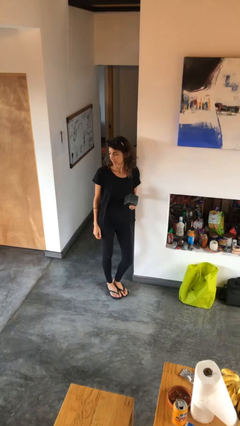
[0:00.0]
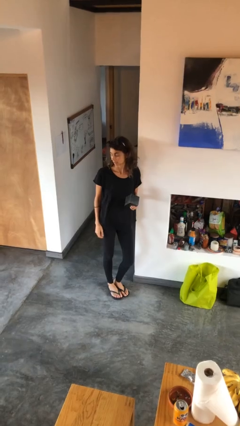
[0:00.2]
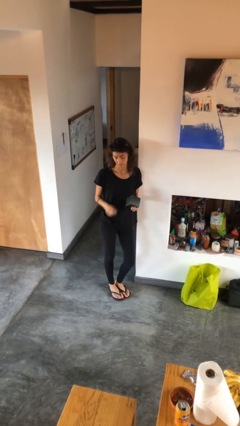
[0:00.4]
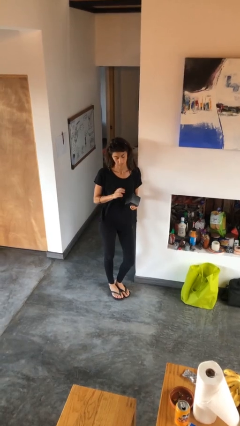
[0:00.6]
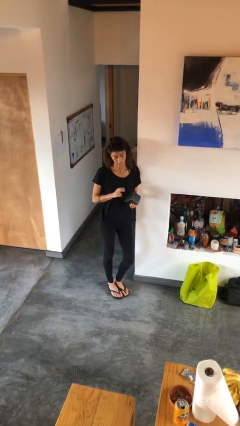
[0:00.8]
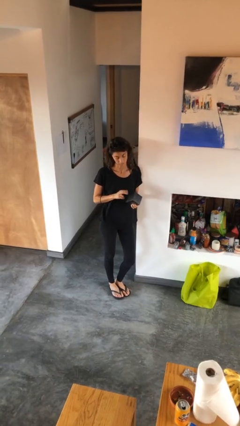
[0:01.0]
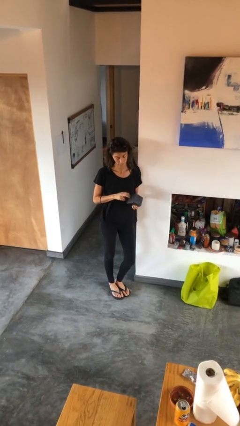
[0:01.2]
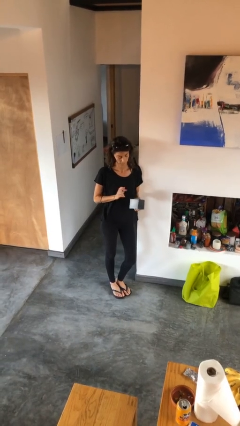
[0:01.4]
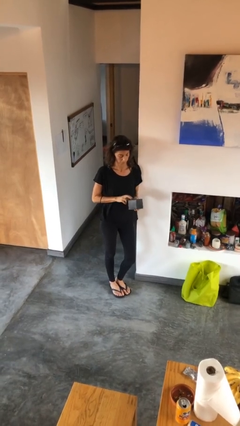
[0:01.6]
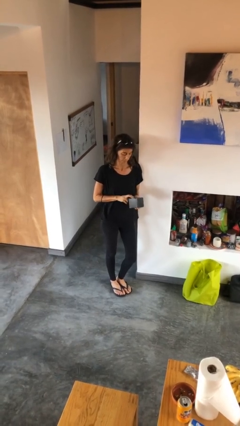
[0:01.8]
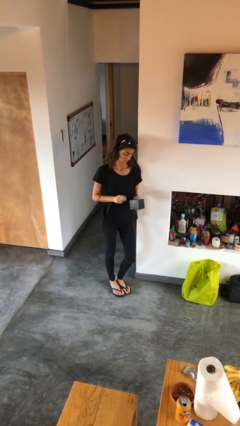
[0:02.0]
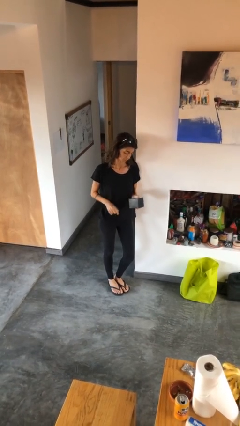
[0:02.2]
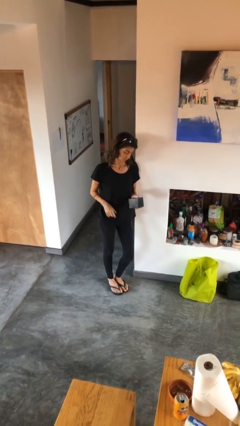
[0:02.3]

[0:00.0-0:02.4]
person taps object with finger

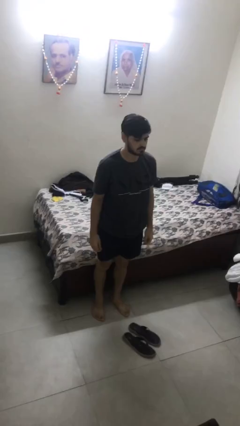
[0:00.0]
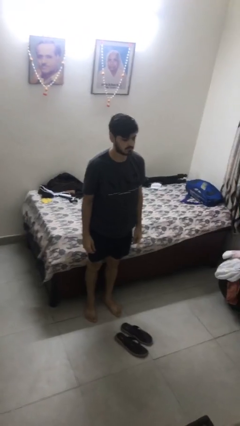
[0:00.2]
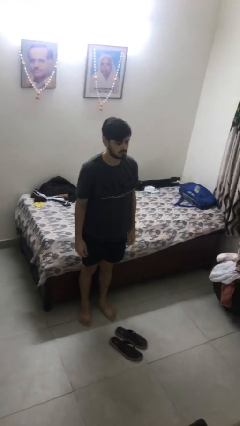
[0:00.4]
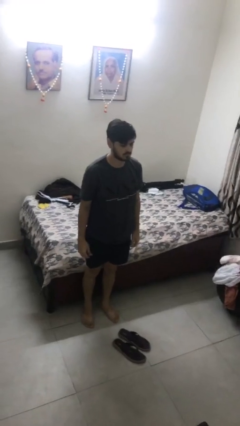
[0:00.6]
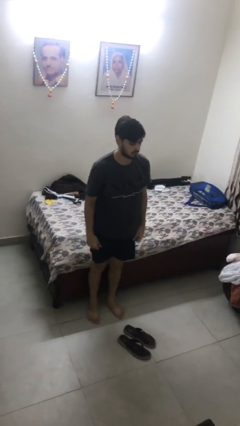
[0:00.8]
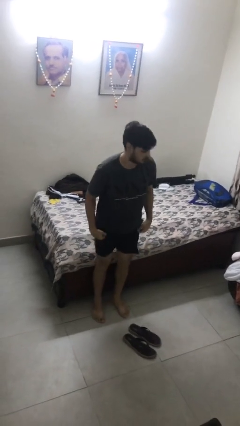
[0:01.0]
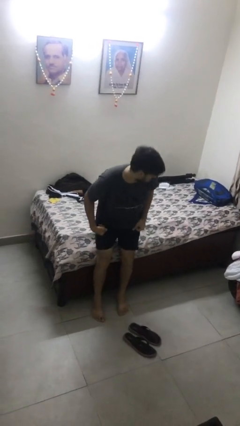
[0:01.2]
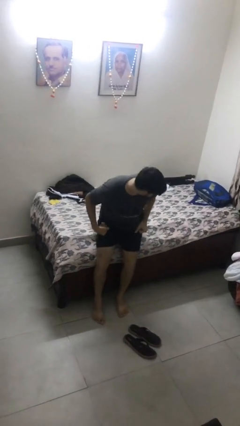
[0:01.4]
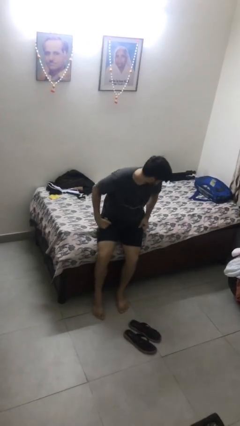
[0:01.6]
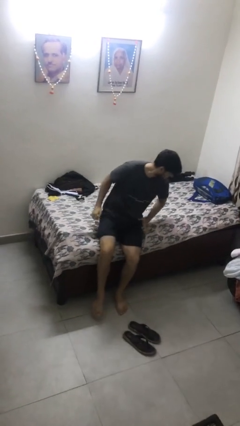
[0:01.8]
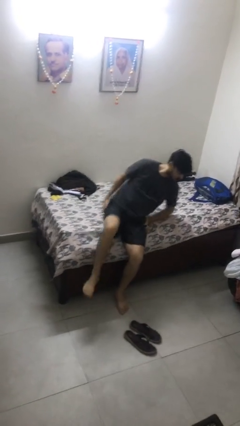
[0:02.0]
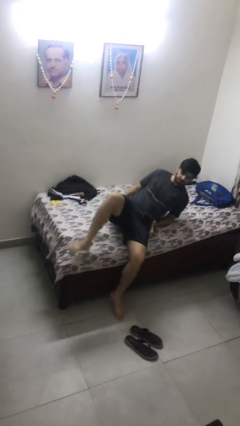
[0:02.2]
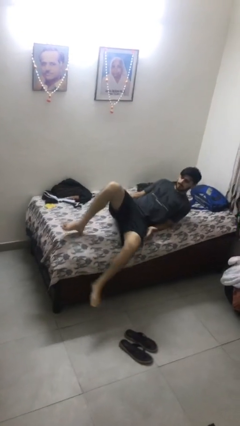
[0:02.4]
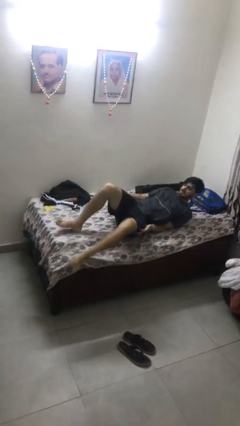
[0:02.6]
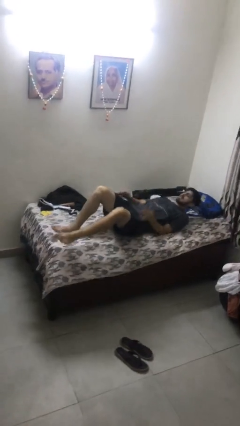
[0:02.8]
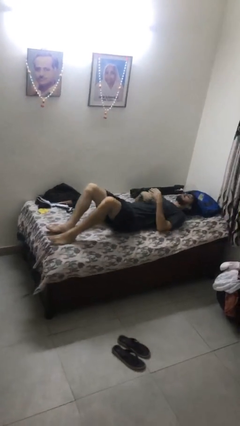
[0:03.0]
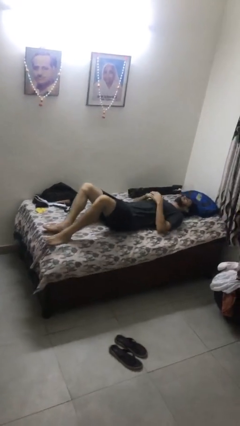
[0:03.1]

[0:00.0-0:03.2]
person lies down on bed

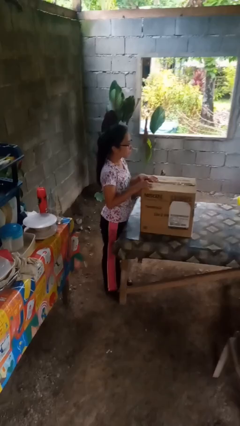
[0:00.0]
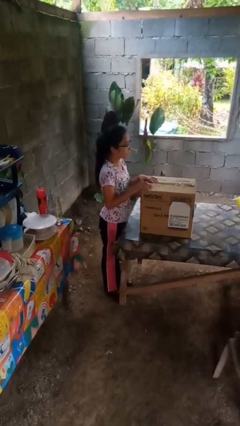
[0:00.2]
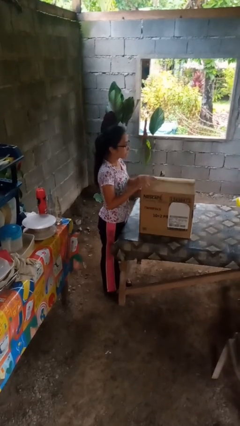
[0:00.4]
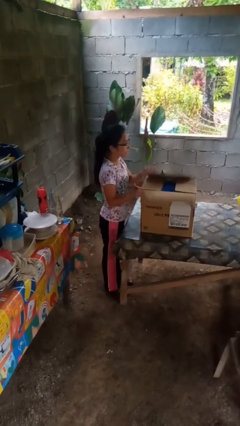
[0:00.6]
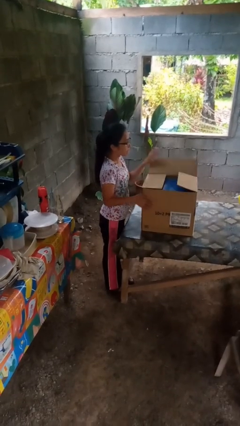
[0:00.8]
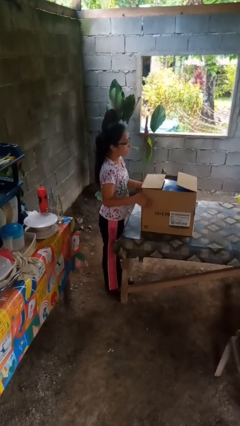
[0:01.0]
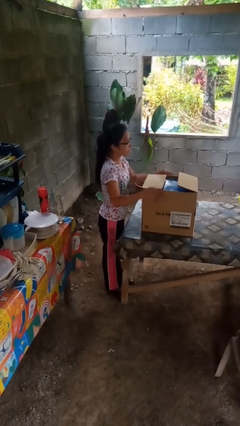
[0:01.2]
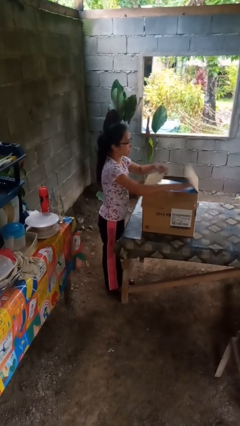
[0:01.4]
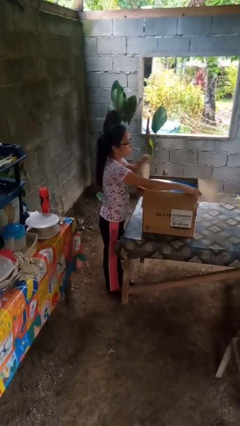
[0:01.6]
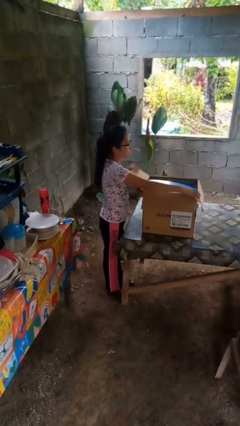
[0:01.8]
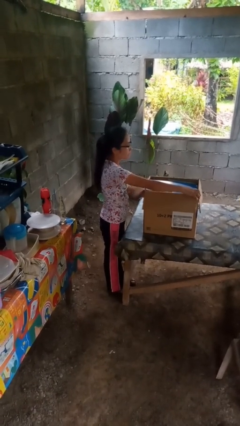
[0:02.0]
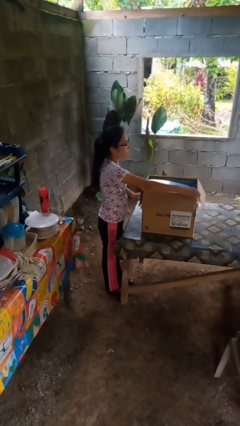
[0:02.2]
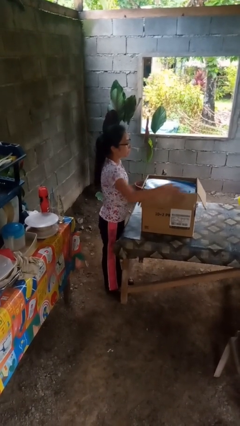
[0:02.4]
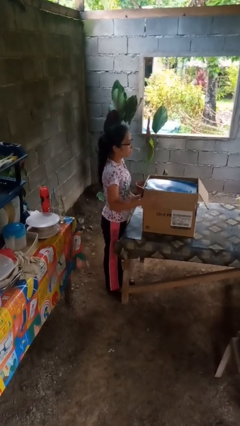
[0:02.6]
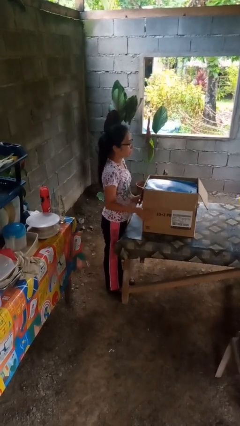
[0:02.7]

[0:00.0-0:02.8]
person opens box

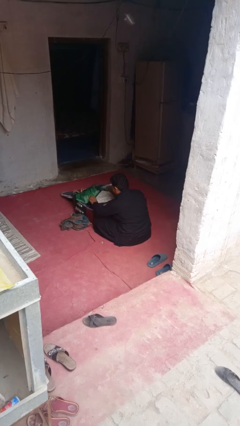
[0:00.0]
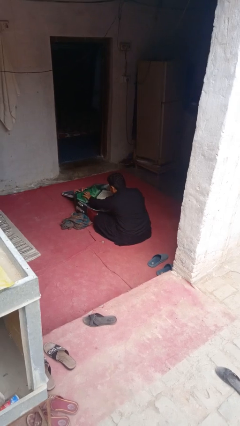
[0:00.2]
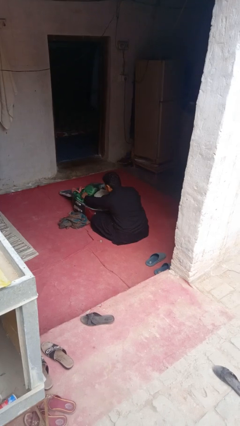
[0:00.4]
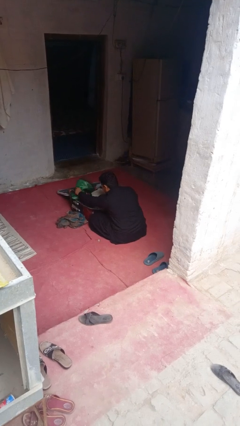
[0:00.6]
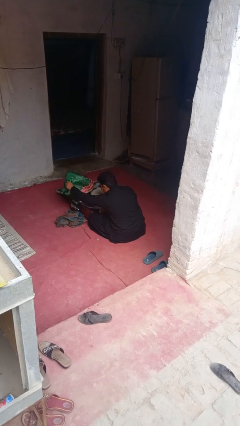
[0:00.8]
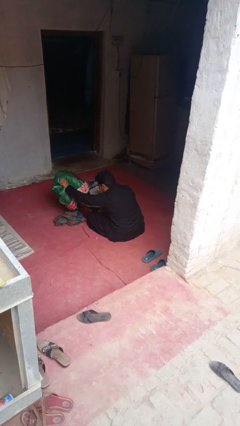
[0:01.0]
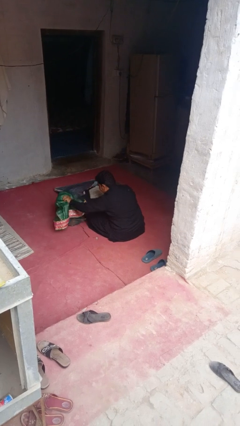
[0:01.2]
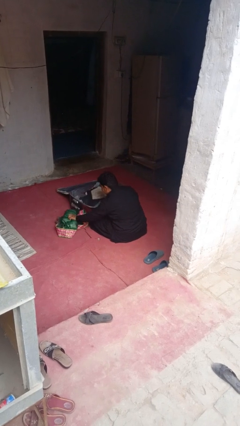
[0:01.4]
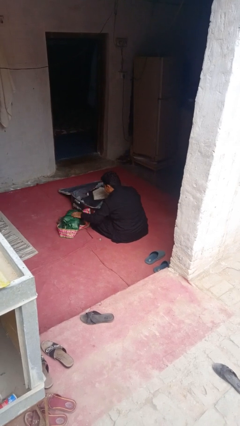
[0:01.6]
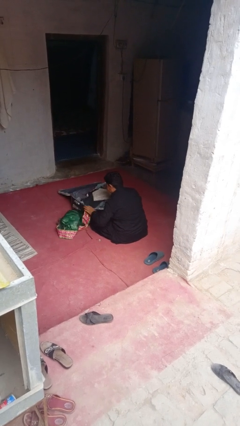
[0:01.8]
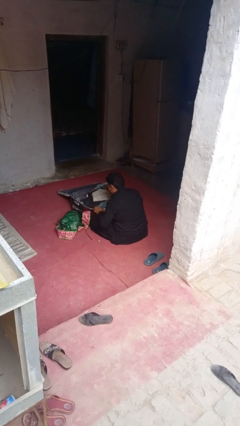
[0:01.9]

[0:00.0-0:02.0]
person unloads clothes from suitcase

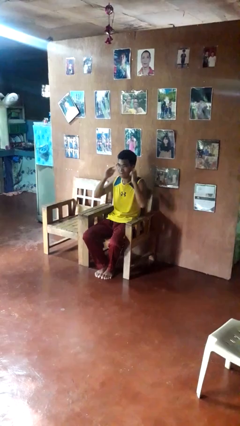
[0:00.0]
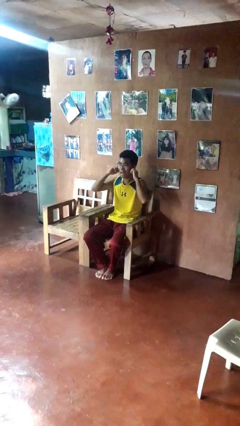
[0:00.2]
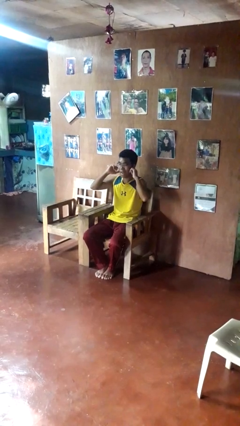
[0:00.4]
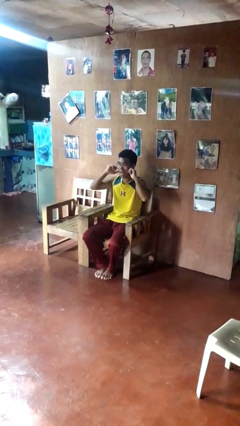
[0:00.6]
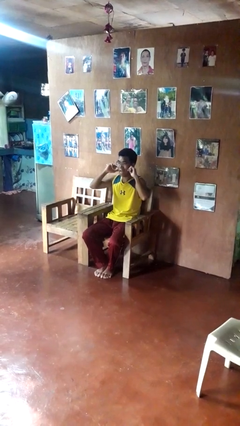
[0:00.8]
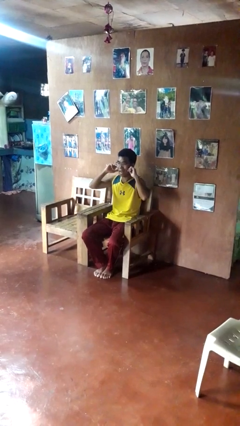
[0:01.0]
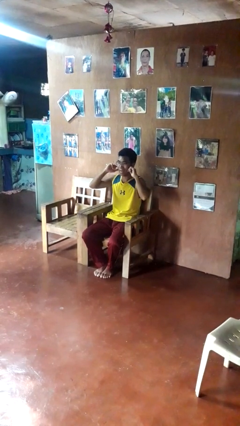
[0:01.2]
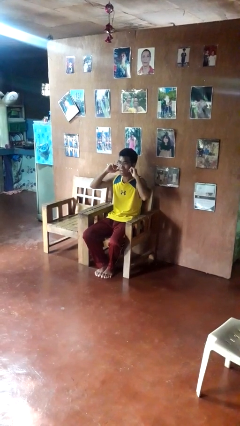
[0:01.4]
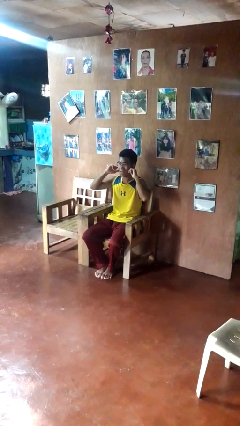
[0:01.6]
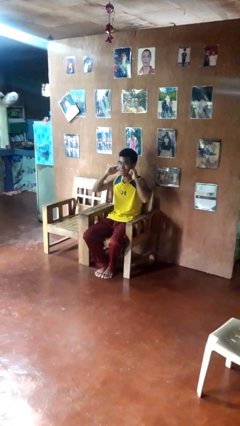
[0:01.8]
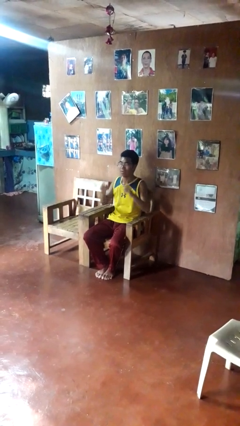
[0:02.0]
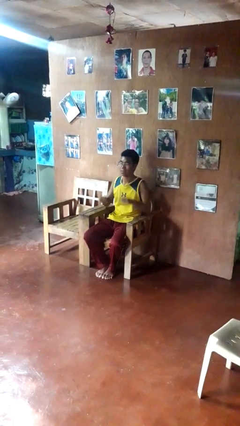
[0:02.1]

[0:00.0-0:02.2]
person puts fingers in ear

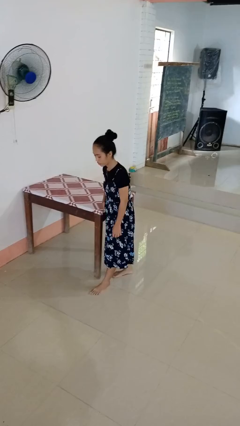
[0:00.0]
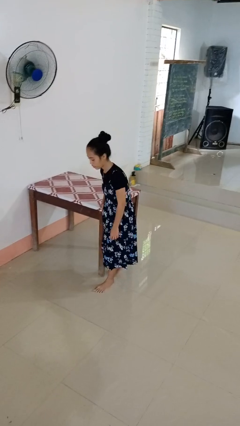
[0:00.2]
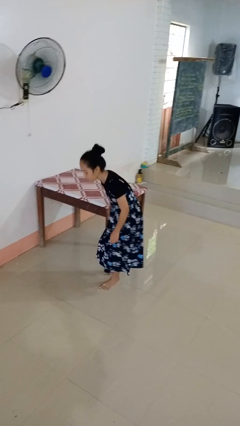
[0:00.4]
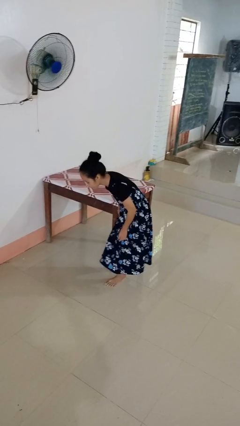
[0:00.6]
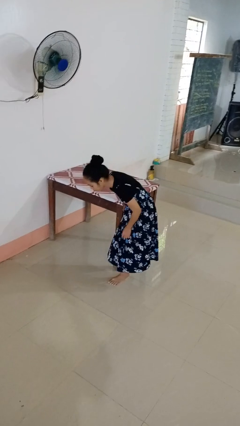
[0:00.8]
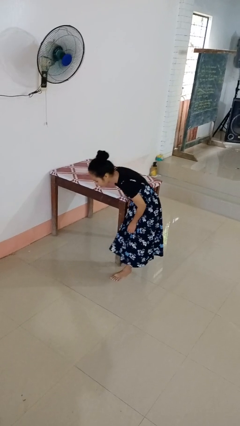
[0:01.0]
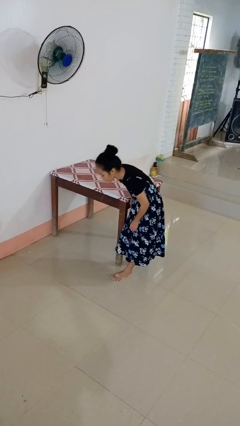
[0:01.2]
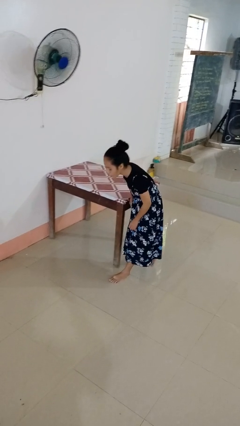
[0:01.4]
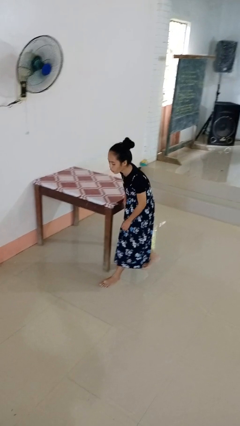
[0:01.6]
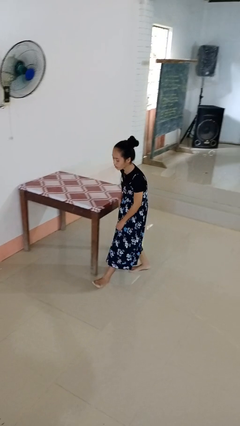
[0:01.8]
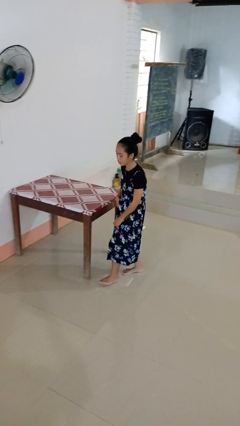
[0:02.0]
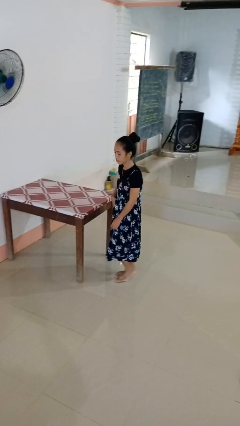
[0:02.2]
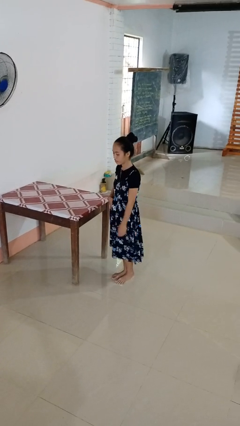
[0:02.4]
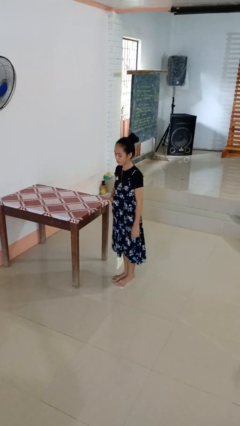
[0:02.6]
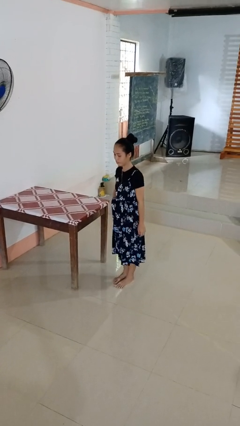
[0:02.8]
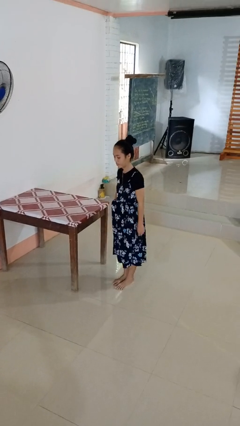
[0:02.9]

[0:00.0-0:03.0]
person stubs toe

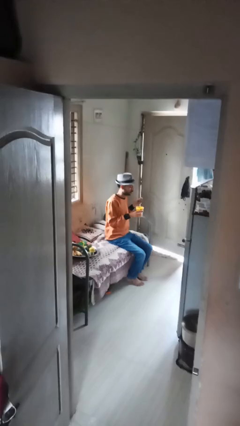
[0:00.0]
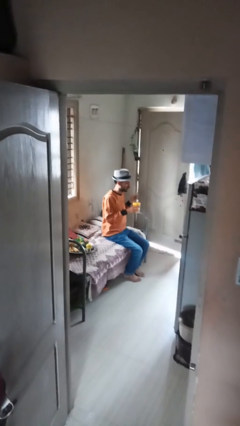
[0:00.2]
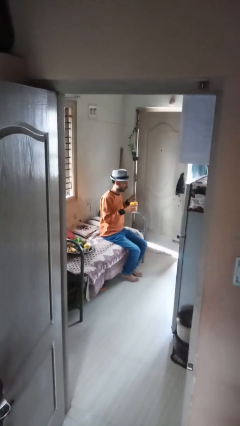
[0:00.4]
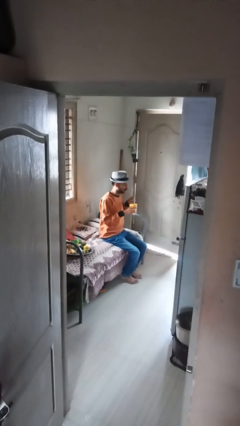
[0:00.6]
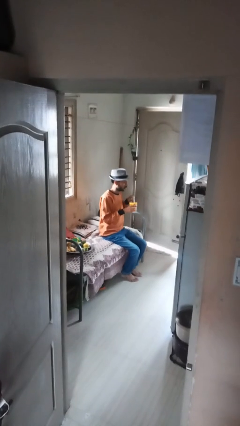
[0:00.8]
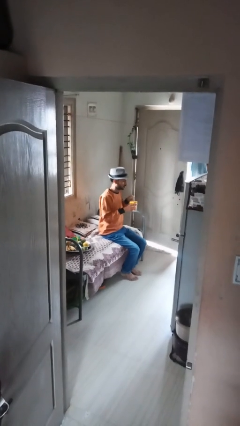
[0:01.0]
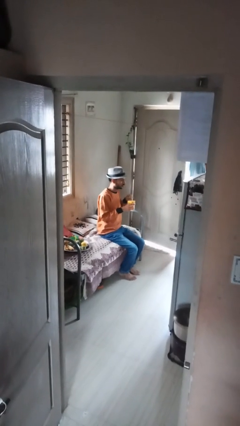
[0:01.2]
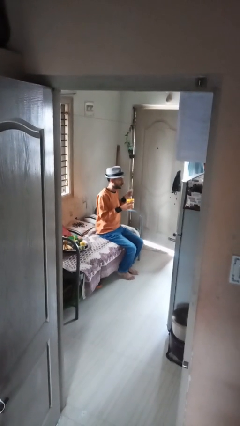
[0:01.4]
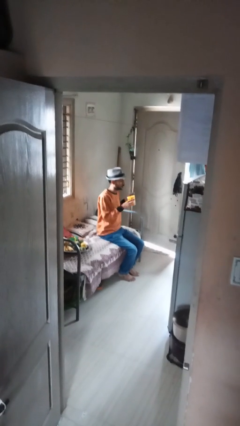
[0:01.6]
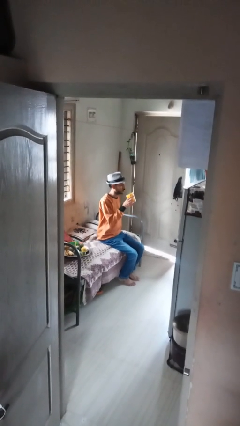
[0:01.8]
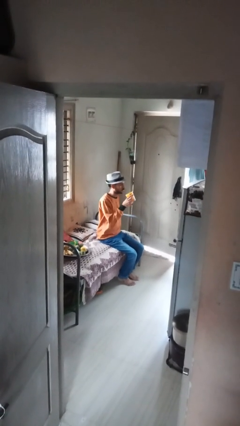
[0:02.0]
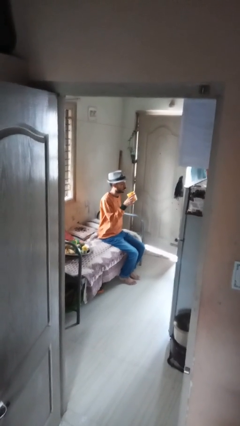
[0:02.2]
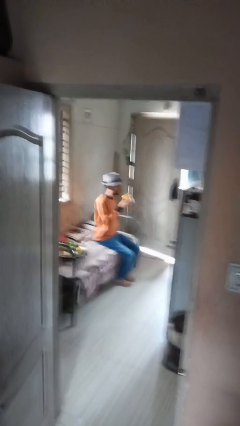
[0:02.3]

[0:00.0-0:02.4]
person stirs mug
